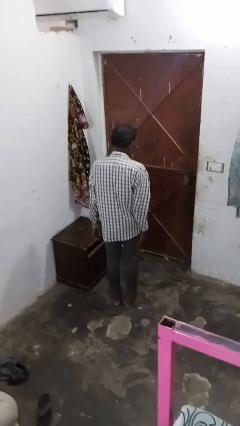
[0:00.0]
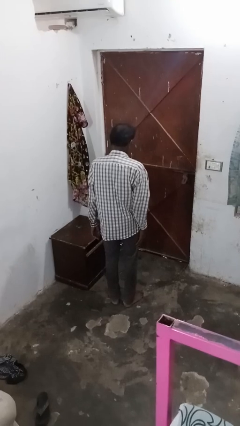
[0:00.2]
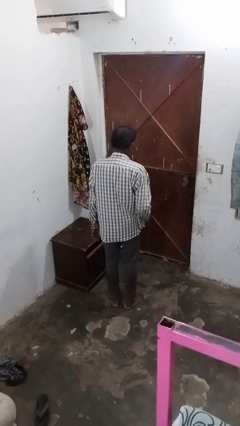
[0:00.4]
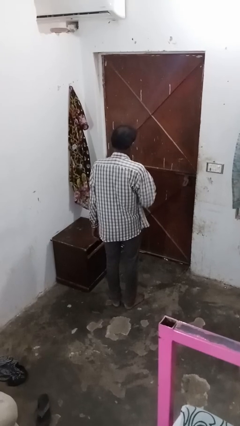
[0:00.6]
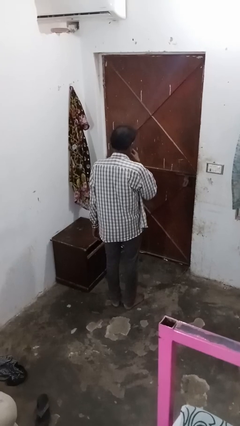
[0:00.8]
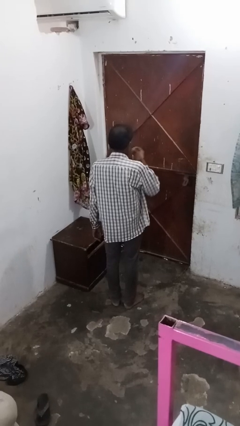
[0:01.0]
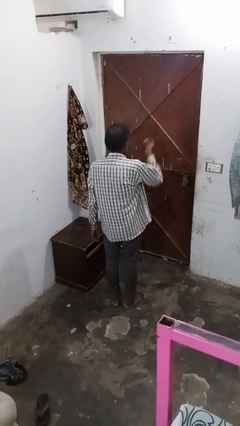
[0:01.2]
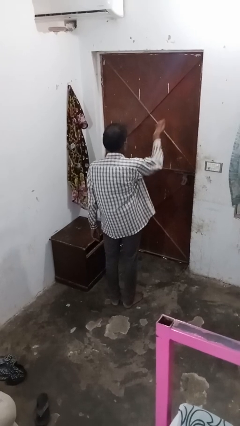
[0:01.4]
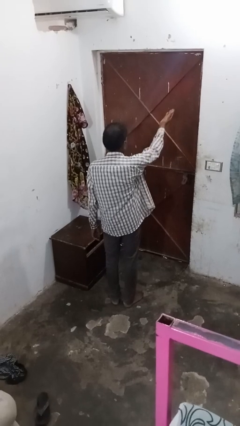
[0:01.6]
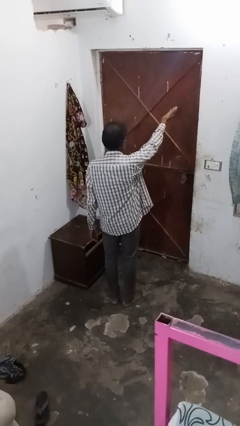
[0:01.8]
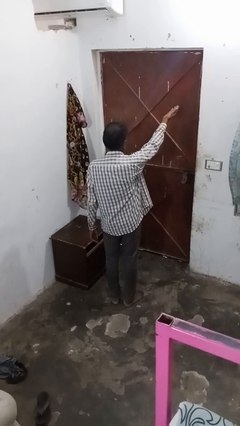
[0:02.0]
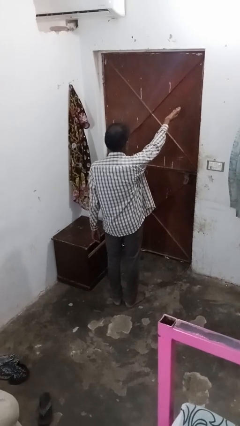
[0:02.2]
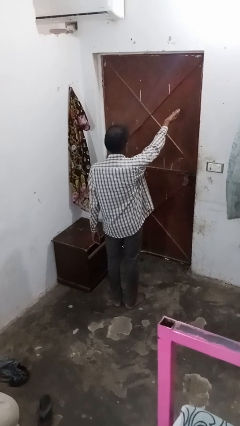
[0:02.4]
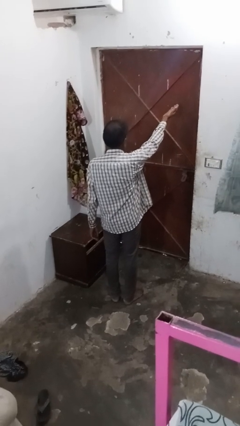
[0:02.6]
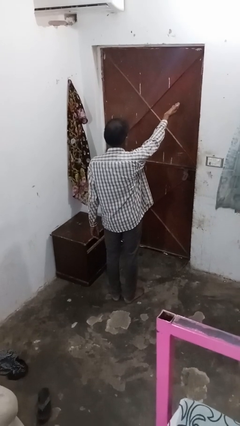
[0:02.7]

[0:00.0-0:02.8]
person gestures blow kiss

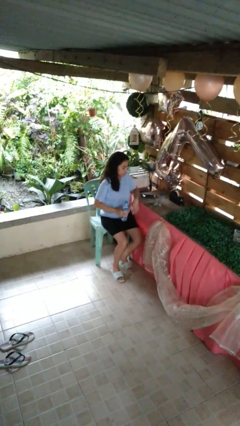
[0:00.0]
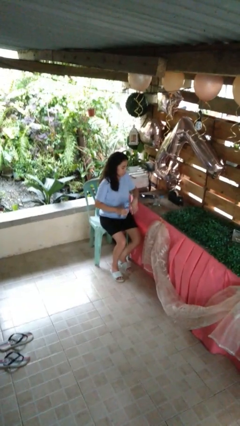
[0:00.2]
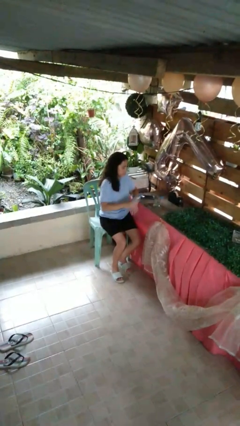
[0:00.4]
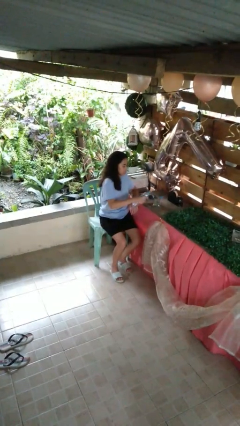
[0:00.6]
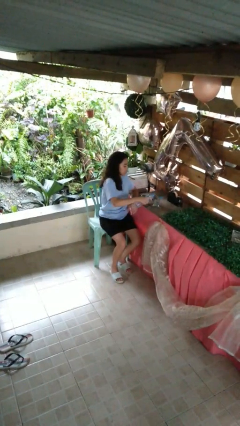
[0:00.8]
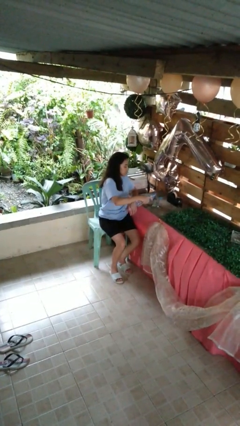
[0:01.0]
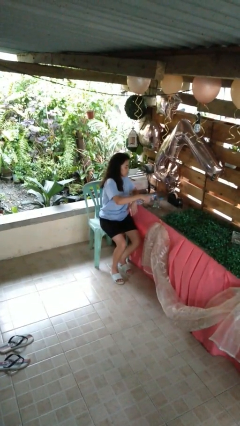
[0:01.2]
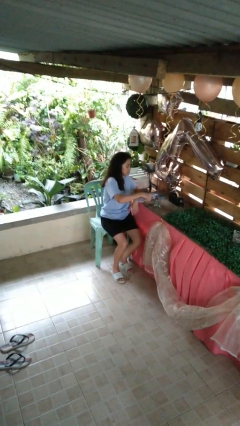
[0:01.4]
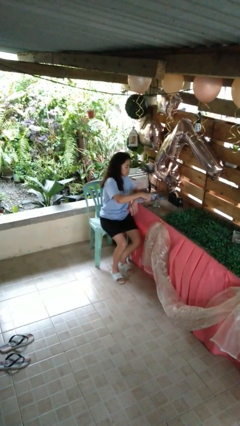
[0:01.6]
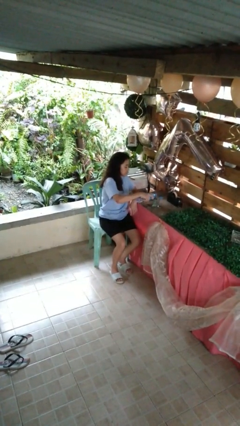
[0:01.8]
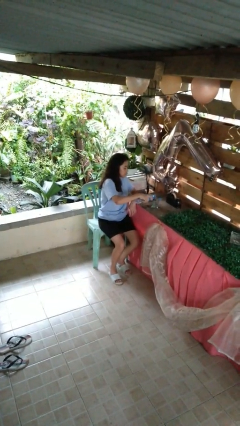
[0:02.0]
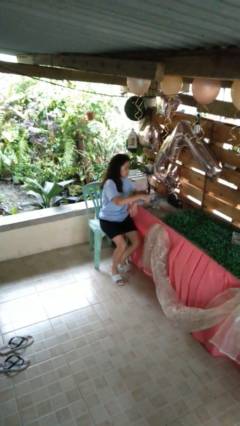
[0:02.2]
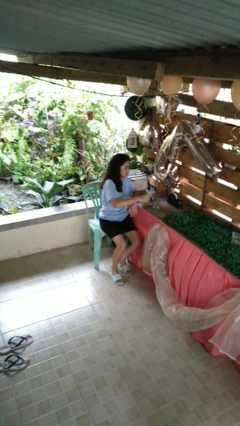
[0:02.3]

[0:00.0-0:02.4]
person pours liquid into cup

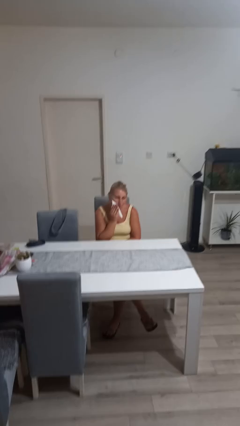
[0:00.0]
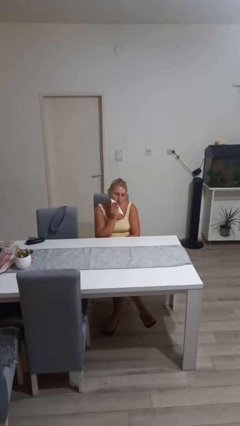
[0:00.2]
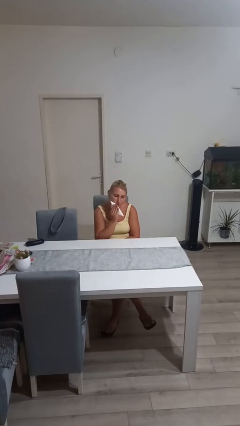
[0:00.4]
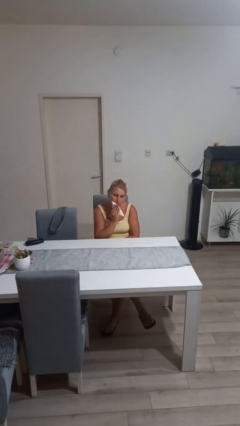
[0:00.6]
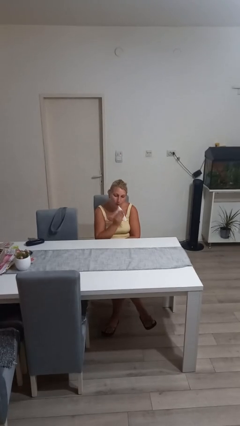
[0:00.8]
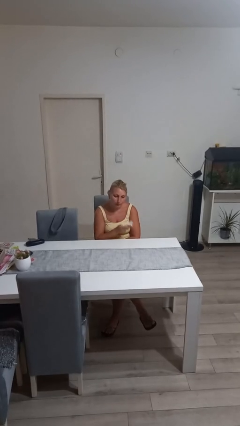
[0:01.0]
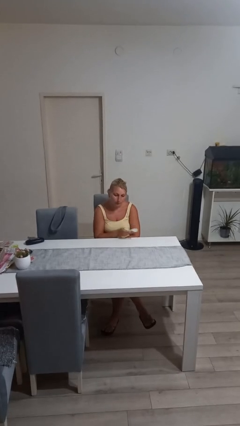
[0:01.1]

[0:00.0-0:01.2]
person wipes mouth with napkin

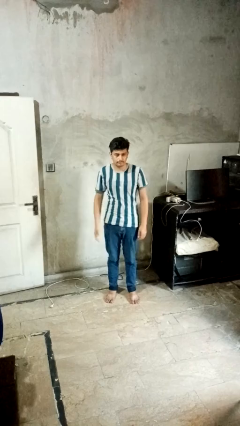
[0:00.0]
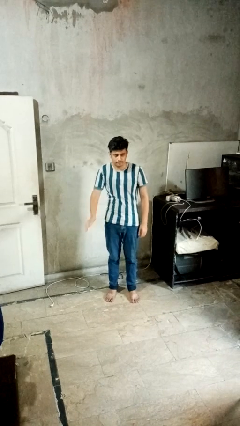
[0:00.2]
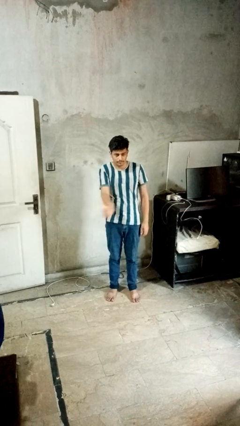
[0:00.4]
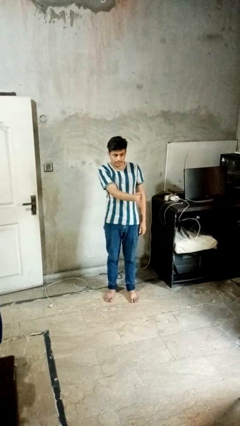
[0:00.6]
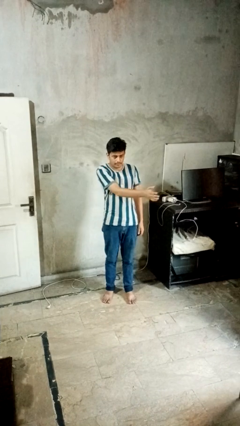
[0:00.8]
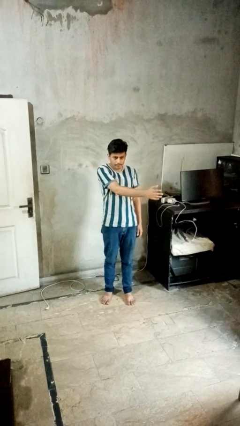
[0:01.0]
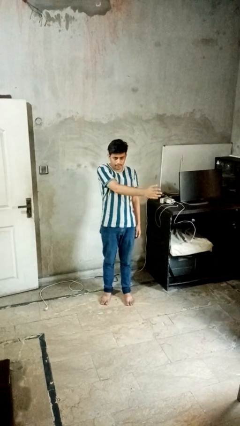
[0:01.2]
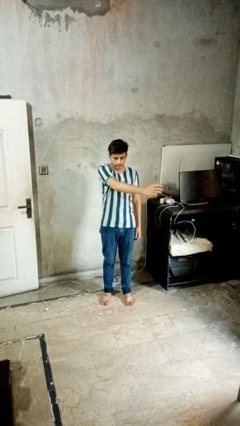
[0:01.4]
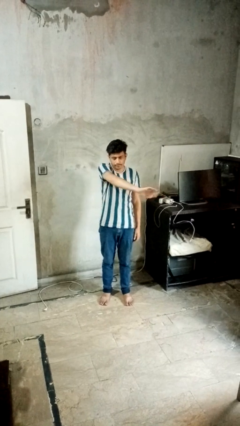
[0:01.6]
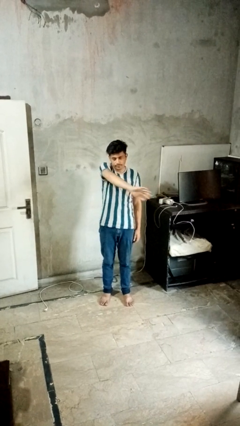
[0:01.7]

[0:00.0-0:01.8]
person gestures swipe left

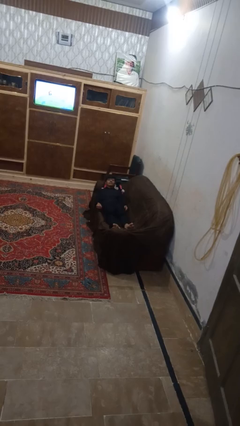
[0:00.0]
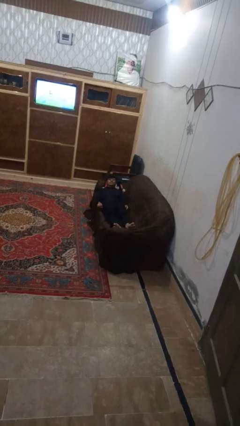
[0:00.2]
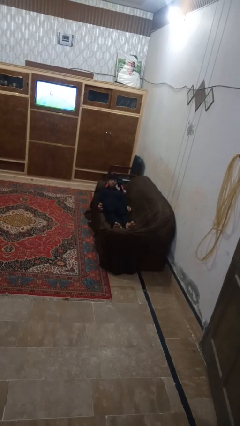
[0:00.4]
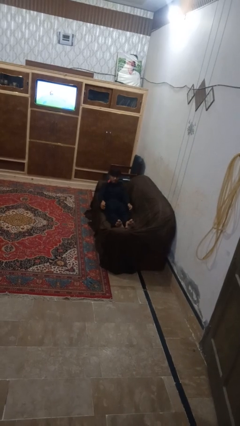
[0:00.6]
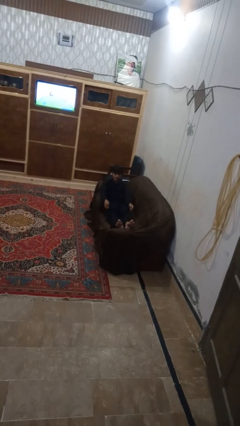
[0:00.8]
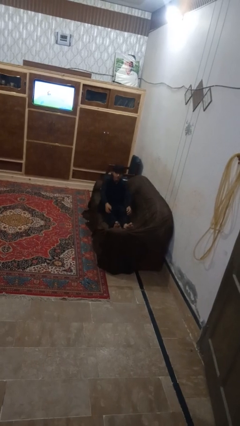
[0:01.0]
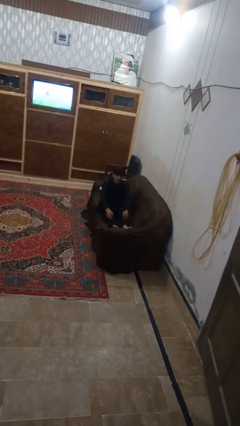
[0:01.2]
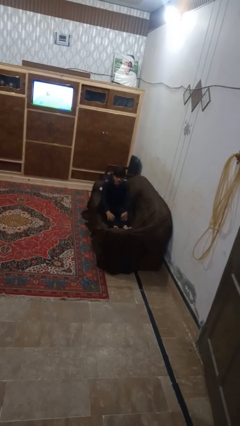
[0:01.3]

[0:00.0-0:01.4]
person stands up

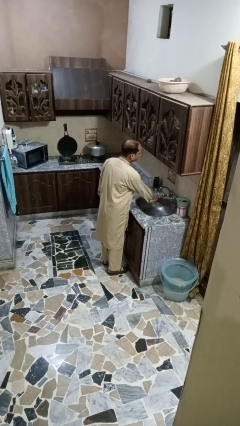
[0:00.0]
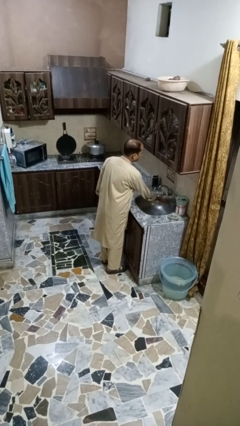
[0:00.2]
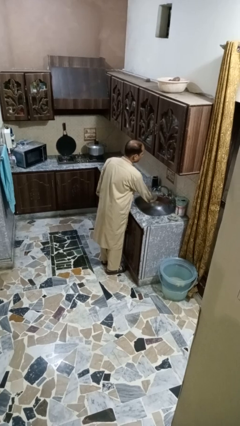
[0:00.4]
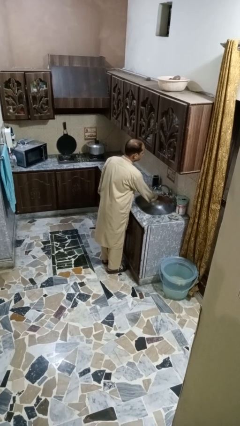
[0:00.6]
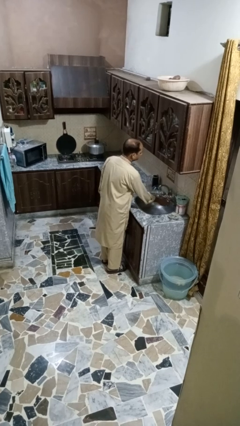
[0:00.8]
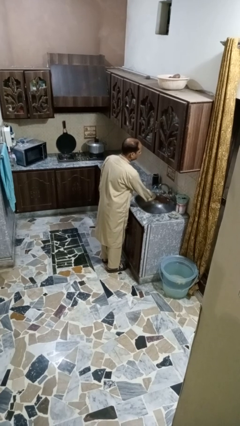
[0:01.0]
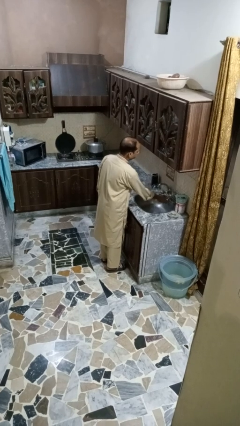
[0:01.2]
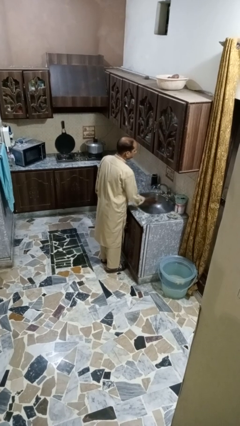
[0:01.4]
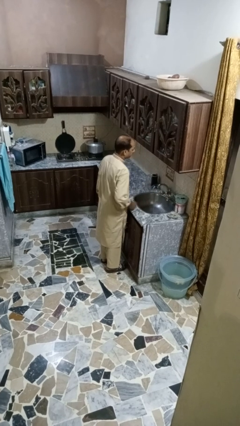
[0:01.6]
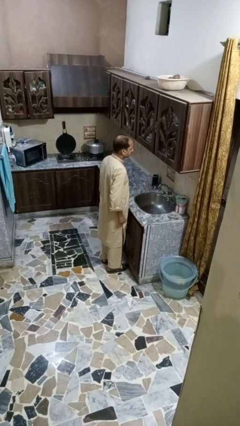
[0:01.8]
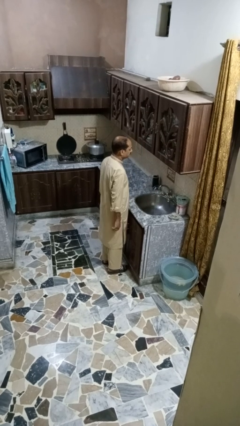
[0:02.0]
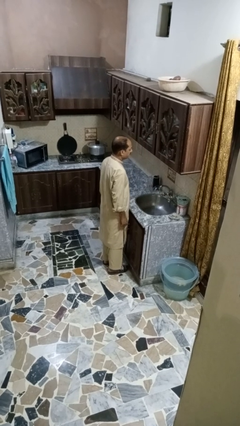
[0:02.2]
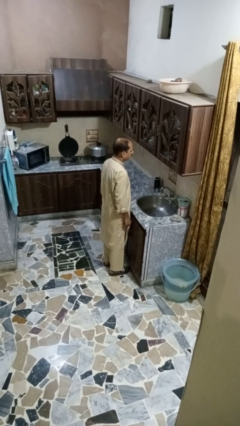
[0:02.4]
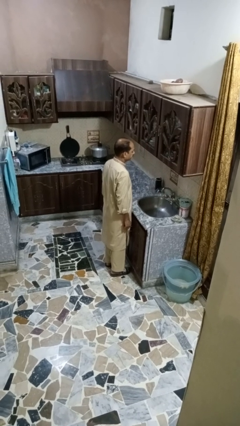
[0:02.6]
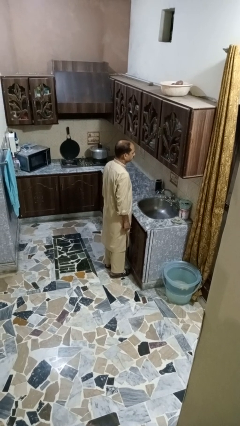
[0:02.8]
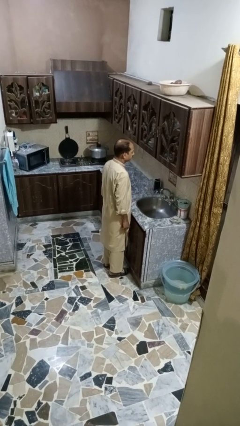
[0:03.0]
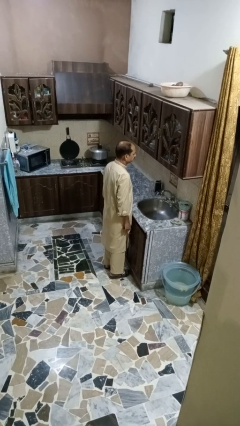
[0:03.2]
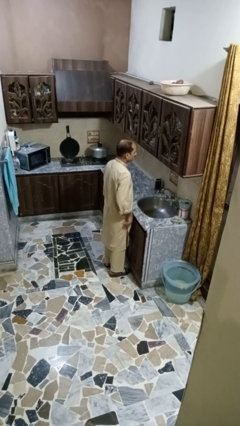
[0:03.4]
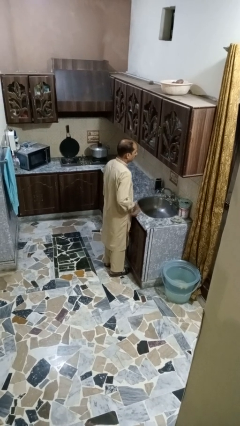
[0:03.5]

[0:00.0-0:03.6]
person turns on faucet

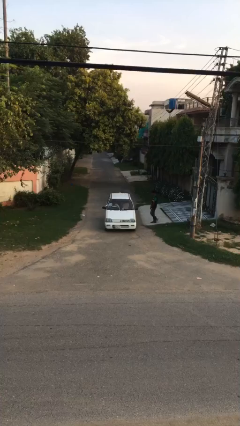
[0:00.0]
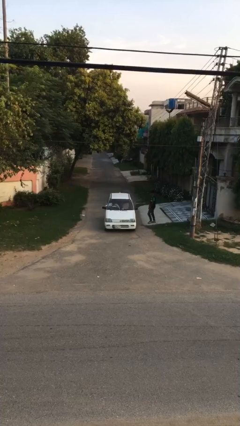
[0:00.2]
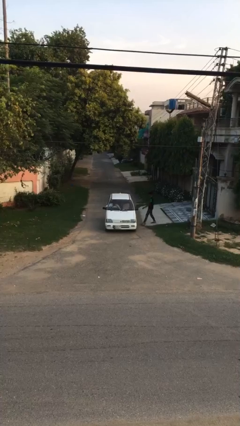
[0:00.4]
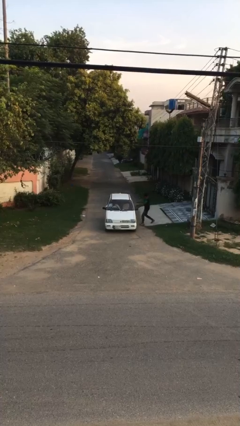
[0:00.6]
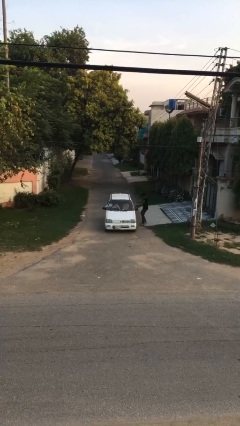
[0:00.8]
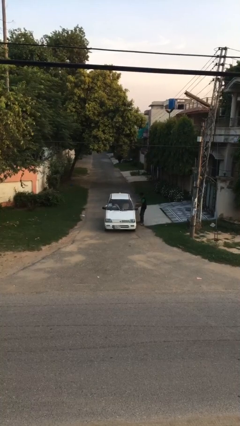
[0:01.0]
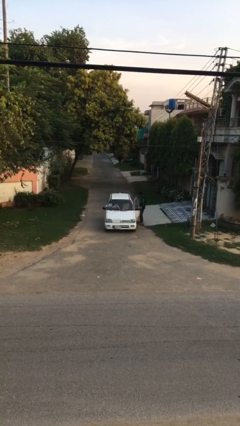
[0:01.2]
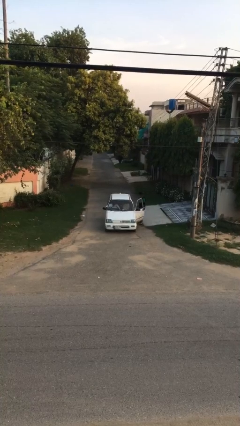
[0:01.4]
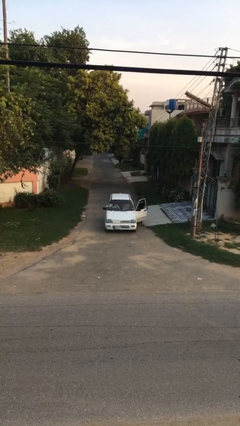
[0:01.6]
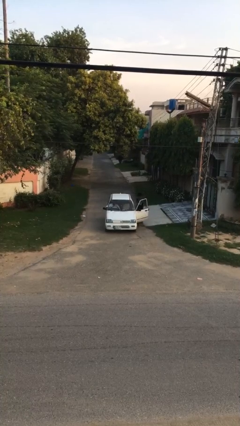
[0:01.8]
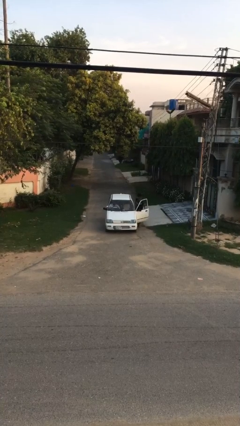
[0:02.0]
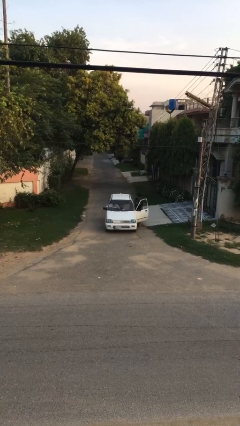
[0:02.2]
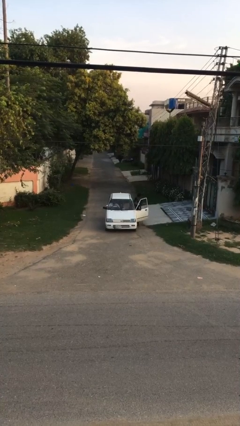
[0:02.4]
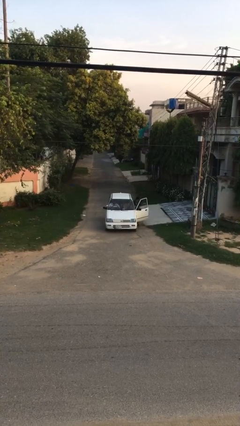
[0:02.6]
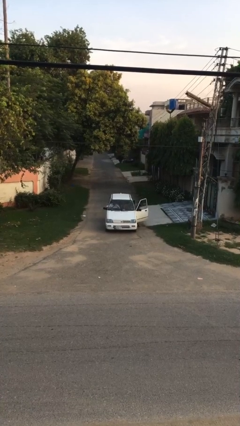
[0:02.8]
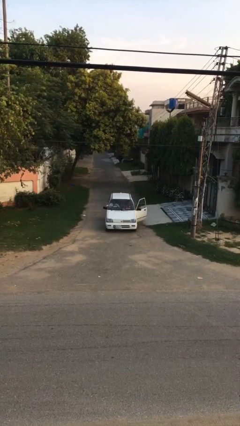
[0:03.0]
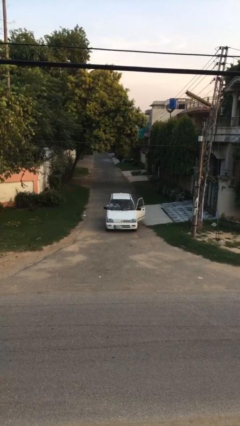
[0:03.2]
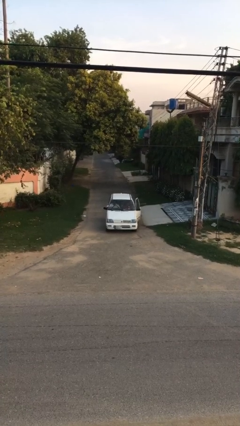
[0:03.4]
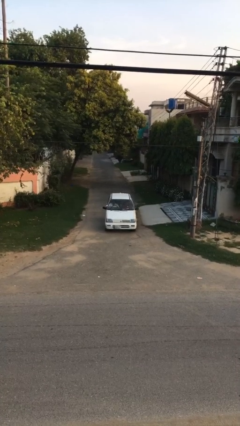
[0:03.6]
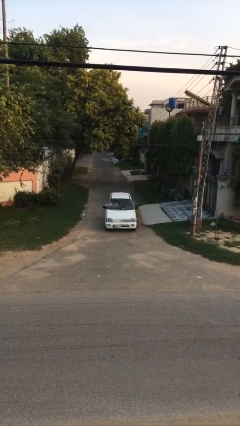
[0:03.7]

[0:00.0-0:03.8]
car picks up person

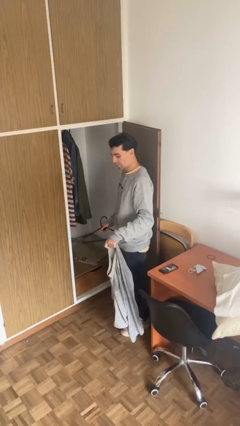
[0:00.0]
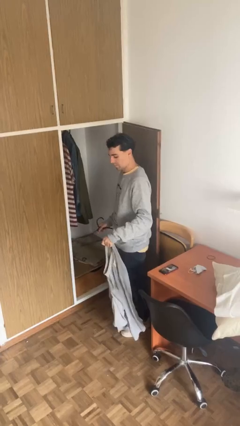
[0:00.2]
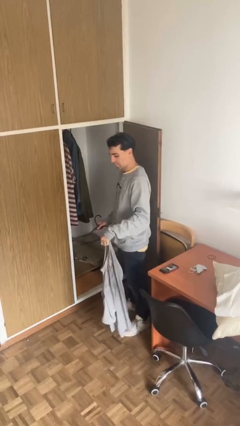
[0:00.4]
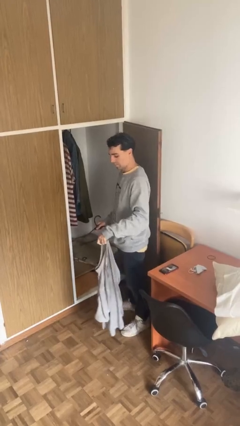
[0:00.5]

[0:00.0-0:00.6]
person takes clothes from closet
